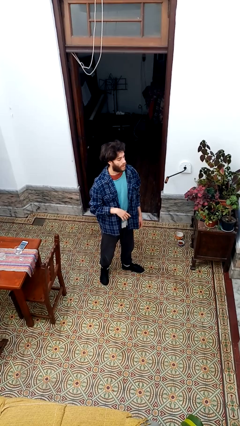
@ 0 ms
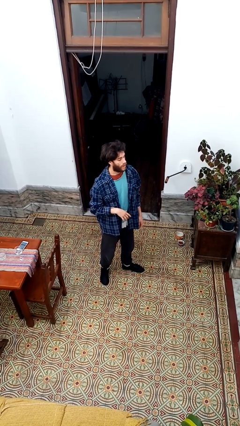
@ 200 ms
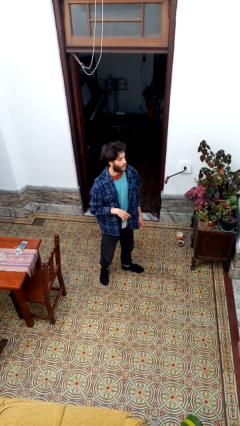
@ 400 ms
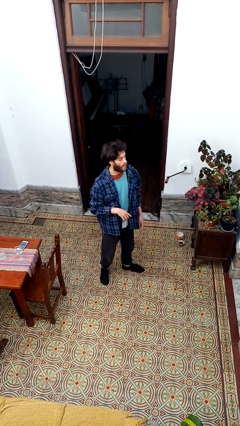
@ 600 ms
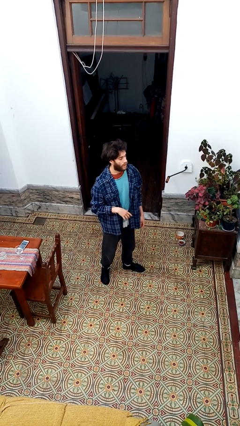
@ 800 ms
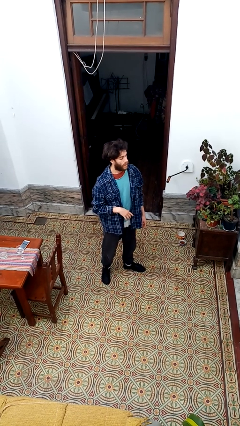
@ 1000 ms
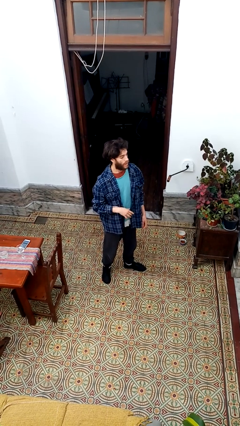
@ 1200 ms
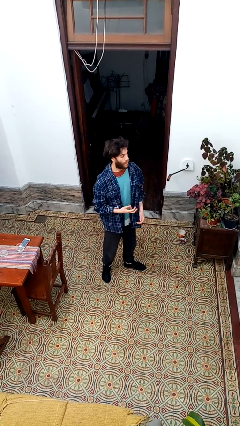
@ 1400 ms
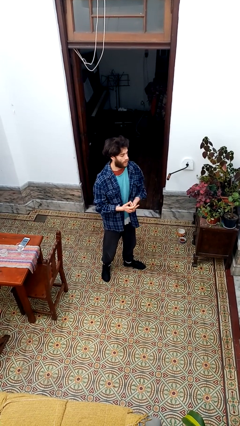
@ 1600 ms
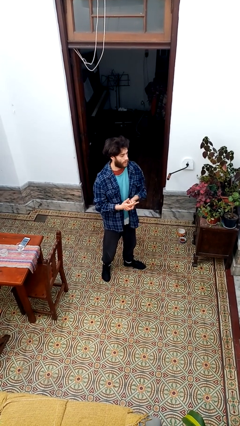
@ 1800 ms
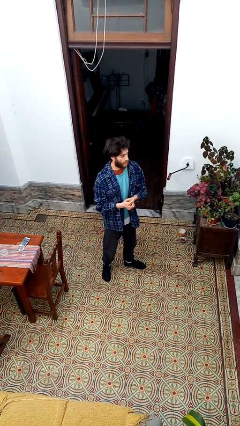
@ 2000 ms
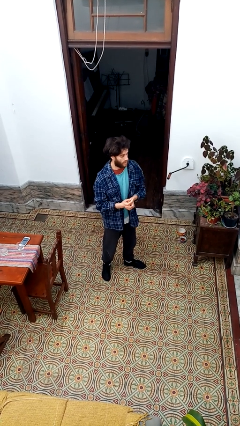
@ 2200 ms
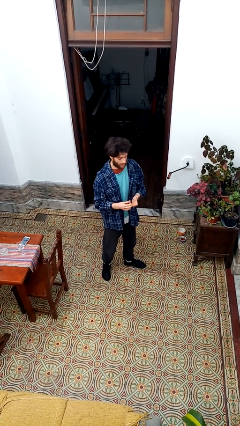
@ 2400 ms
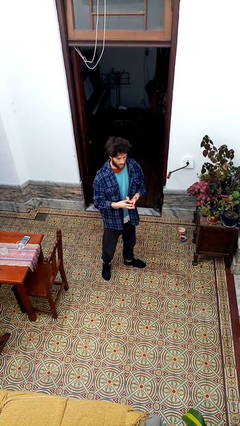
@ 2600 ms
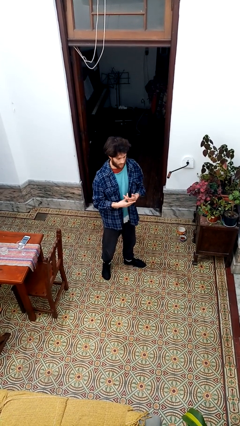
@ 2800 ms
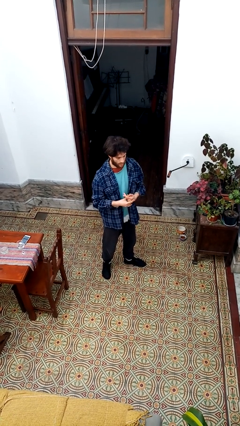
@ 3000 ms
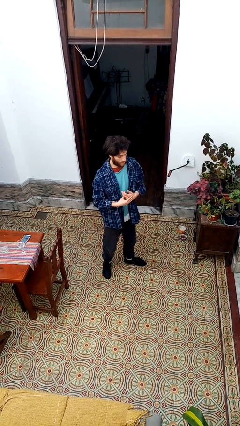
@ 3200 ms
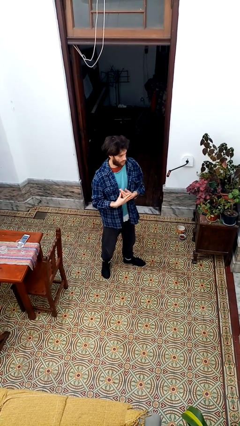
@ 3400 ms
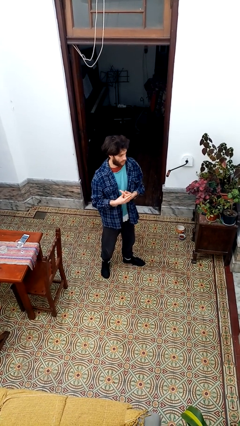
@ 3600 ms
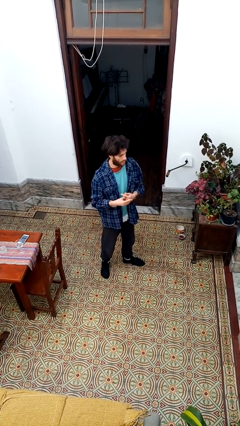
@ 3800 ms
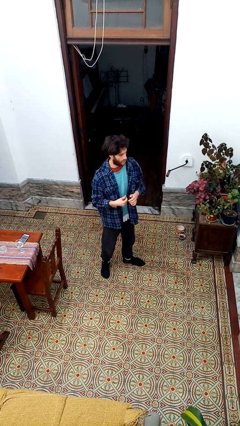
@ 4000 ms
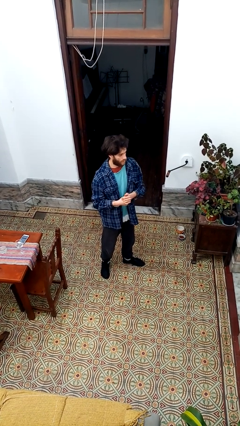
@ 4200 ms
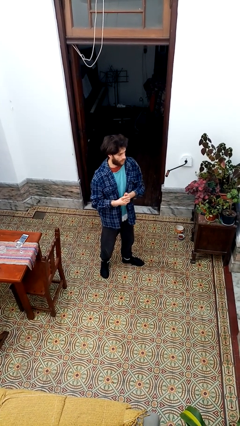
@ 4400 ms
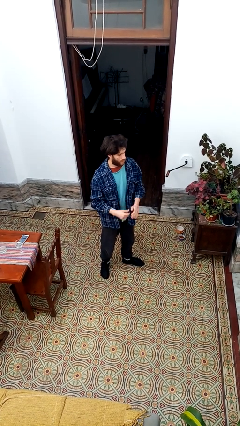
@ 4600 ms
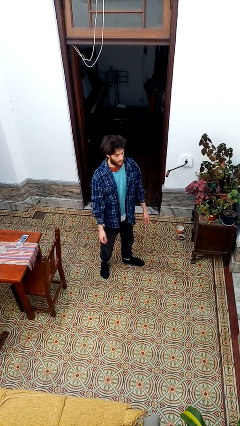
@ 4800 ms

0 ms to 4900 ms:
person cracks knuckles

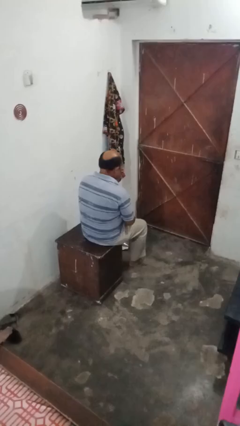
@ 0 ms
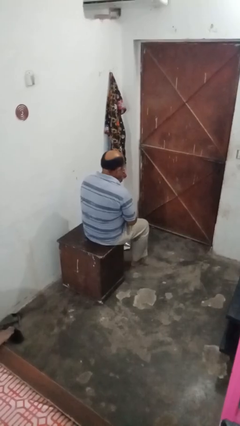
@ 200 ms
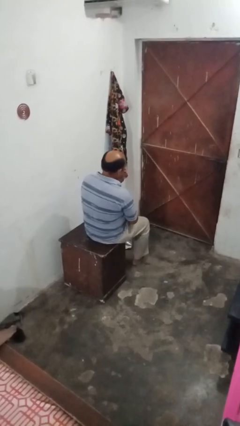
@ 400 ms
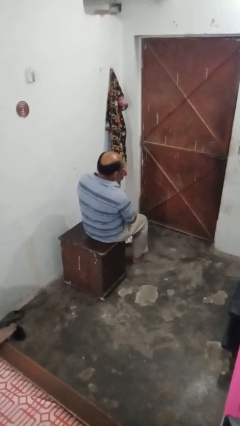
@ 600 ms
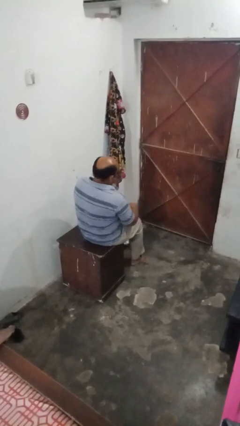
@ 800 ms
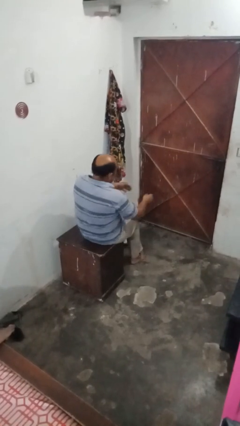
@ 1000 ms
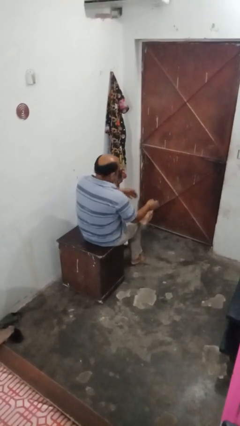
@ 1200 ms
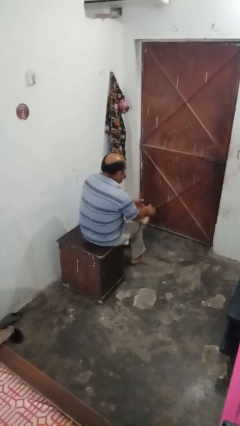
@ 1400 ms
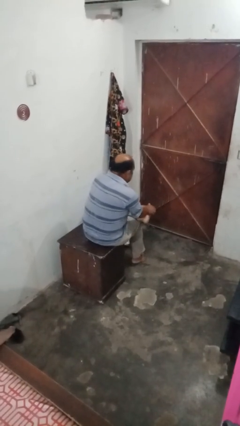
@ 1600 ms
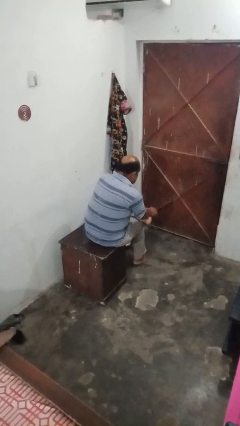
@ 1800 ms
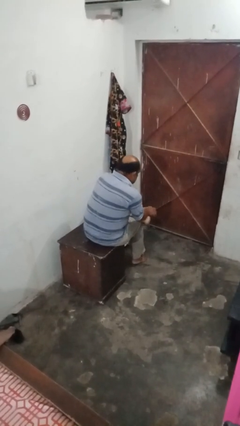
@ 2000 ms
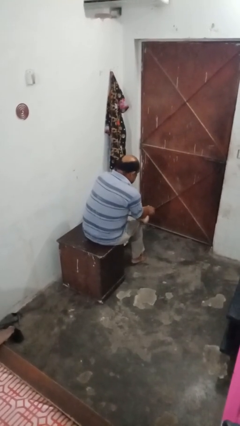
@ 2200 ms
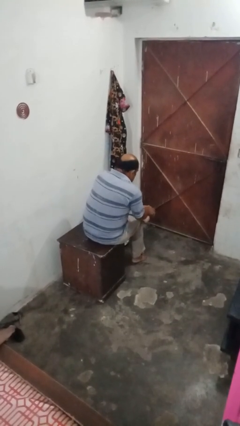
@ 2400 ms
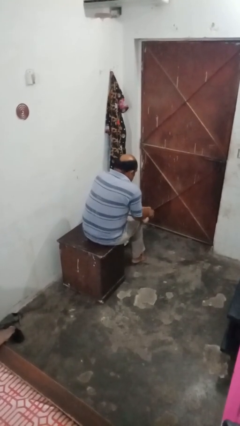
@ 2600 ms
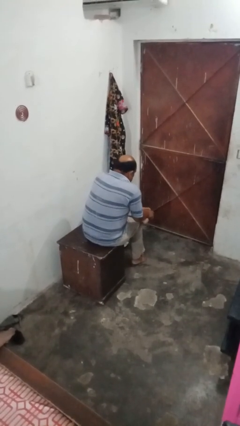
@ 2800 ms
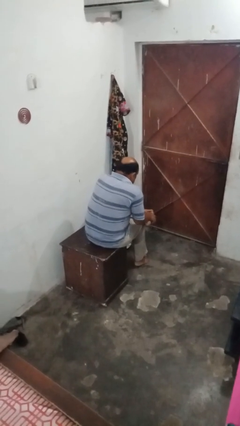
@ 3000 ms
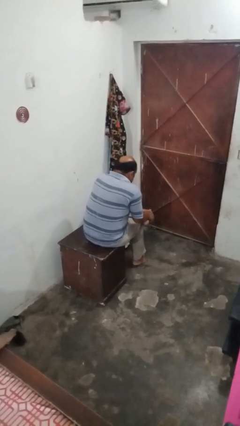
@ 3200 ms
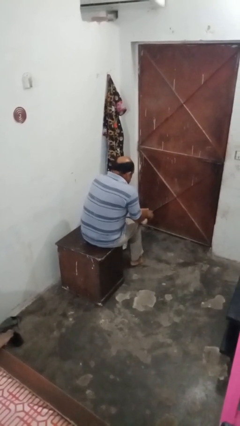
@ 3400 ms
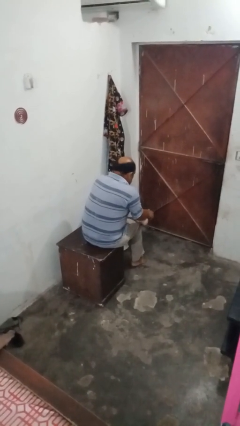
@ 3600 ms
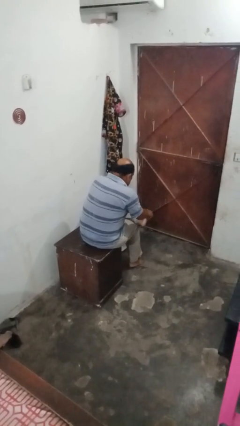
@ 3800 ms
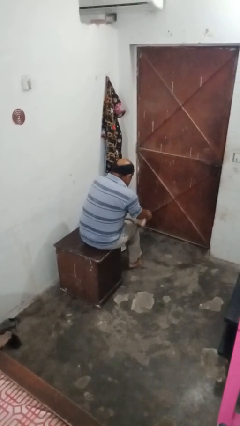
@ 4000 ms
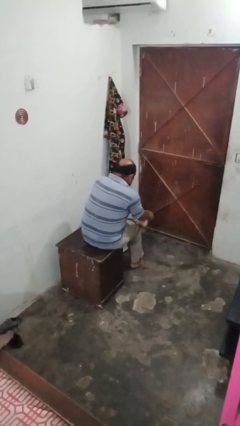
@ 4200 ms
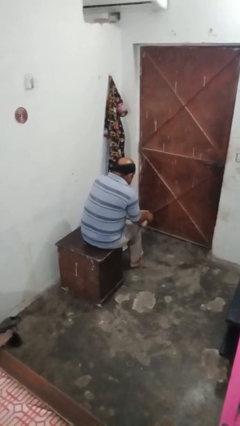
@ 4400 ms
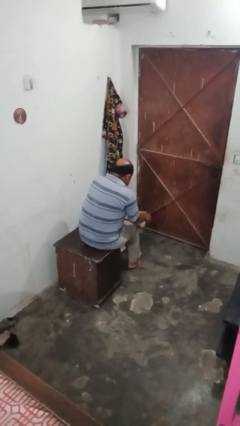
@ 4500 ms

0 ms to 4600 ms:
person rubs foot

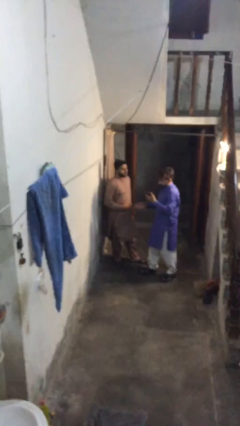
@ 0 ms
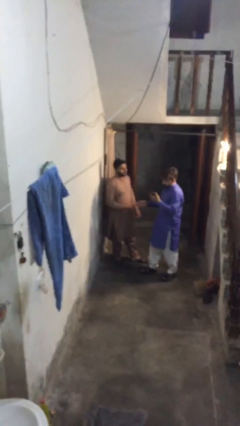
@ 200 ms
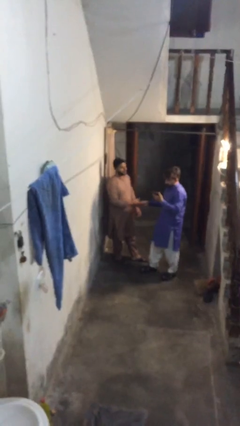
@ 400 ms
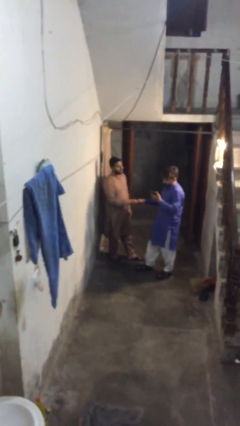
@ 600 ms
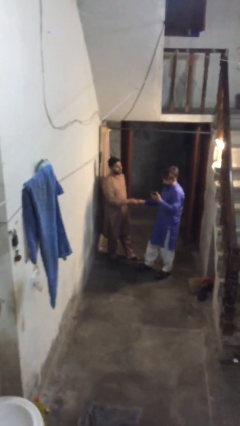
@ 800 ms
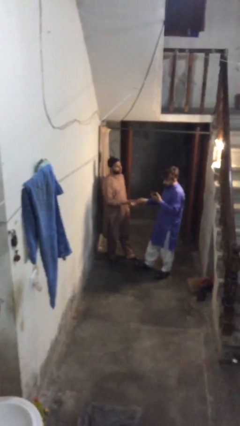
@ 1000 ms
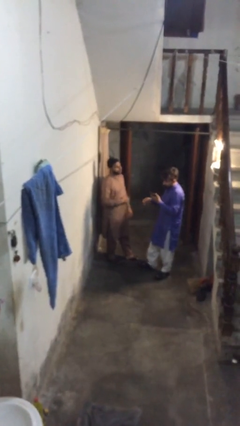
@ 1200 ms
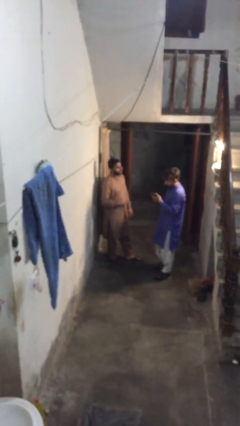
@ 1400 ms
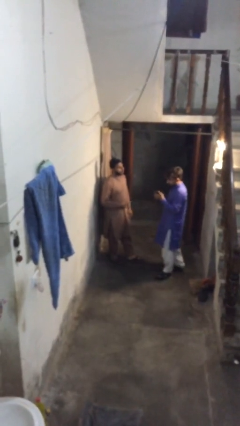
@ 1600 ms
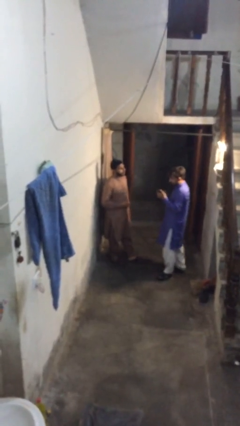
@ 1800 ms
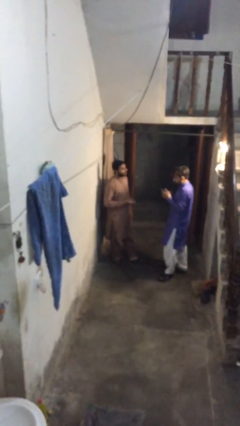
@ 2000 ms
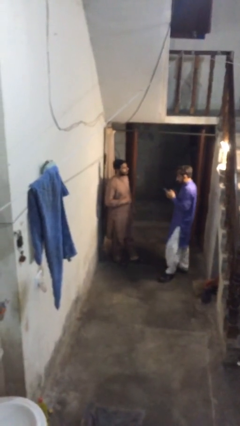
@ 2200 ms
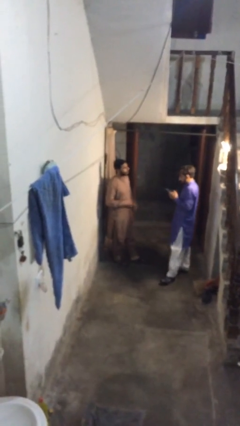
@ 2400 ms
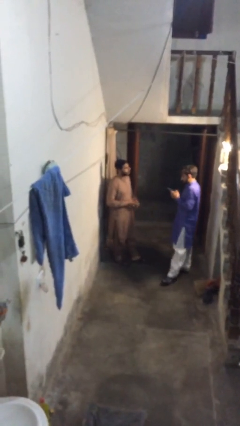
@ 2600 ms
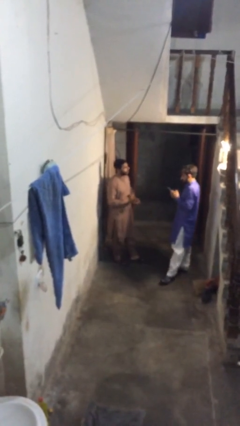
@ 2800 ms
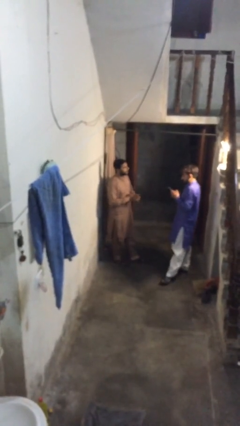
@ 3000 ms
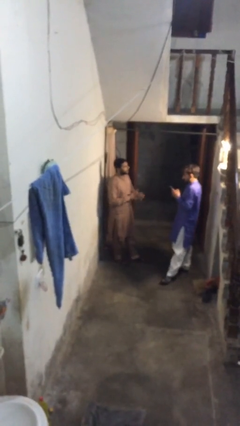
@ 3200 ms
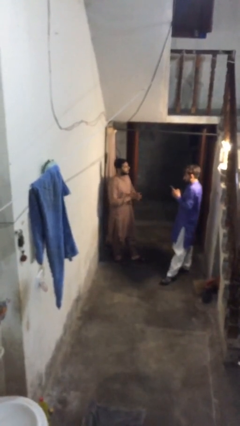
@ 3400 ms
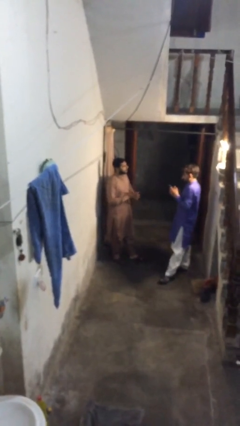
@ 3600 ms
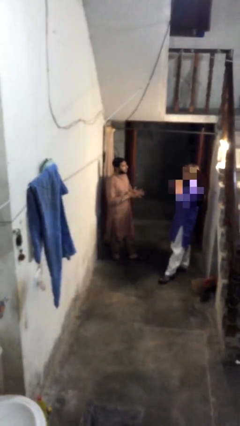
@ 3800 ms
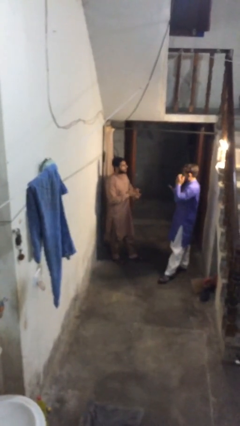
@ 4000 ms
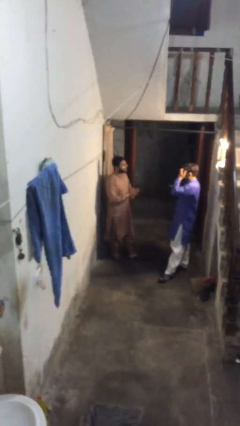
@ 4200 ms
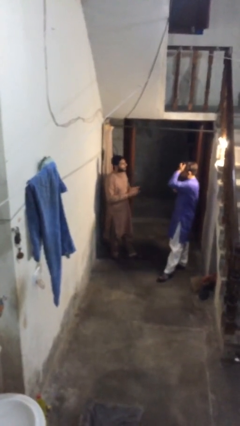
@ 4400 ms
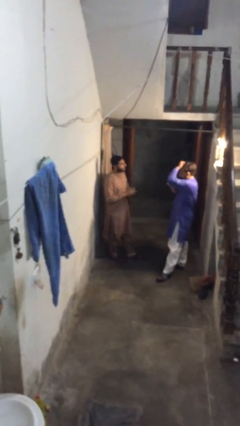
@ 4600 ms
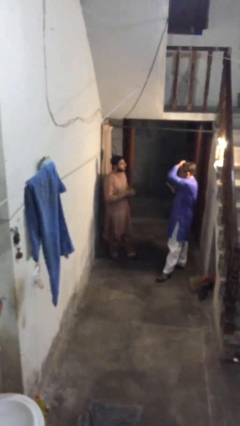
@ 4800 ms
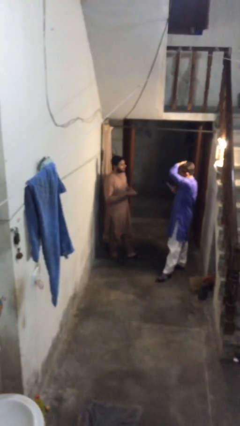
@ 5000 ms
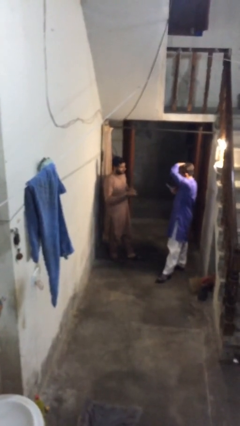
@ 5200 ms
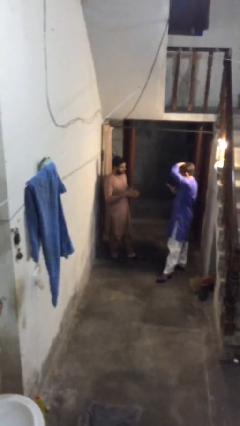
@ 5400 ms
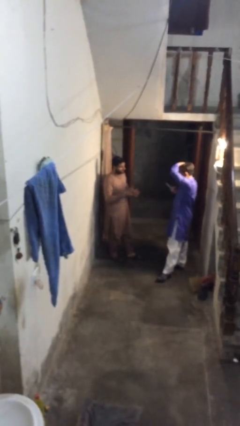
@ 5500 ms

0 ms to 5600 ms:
person talks to person

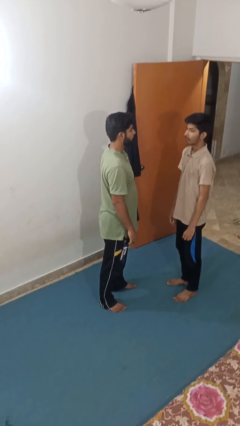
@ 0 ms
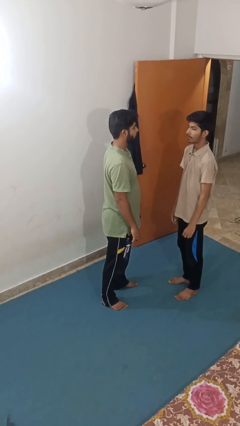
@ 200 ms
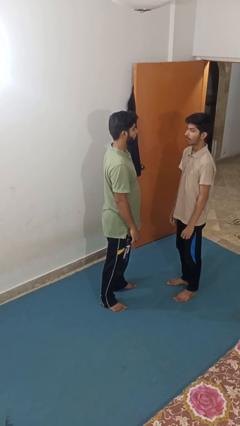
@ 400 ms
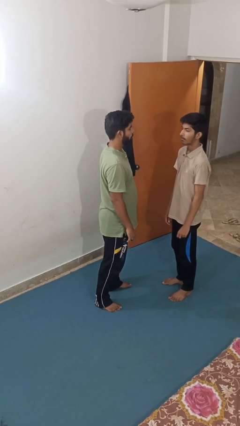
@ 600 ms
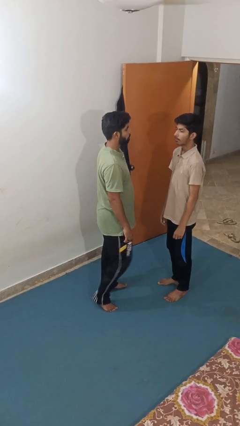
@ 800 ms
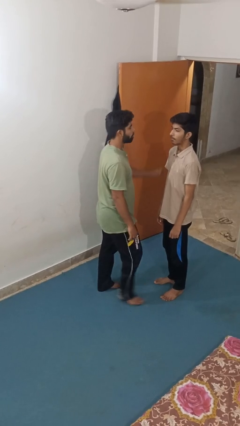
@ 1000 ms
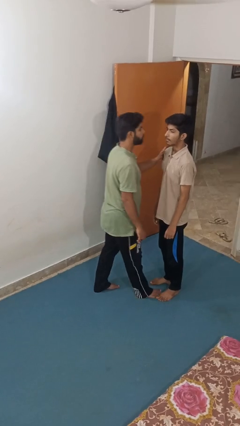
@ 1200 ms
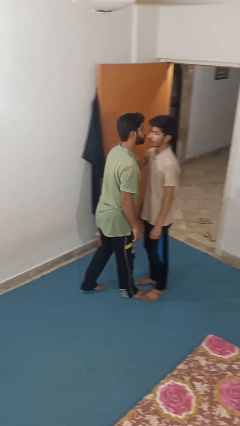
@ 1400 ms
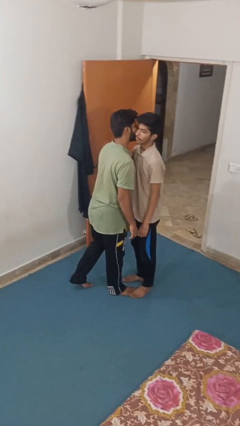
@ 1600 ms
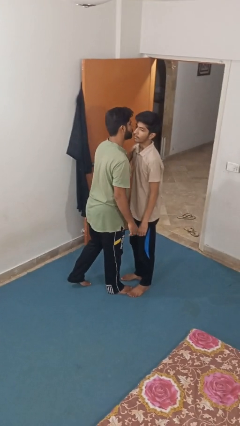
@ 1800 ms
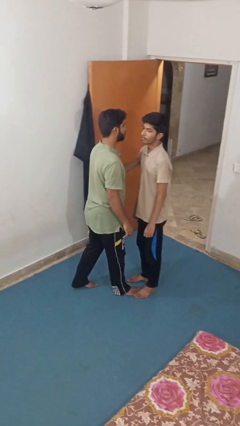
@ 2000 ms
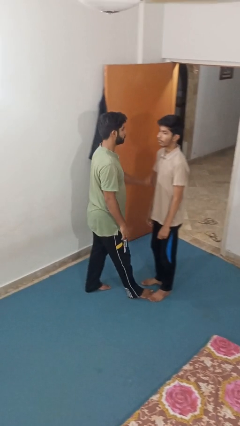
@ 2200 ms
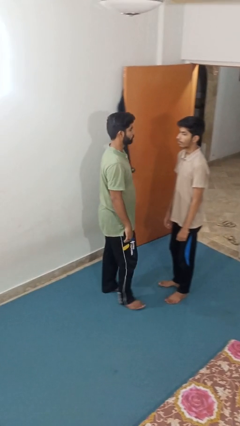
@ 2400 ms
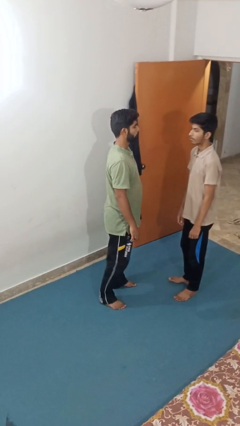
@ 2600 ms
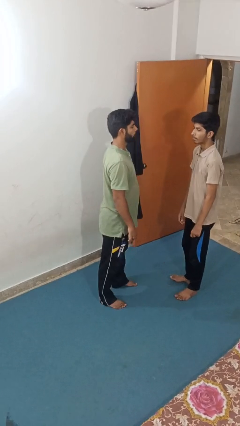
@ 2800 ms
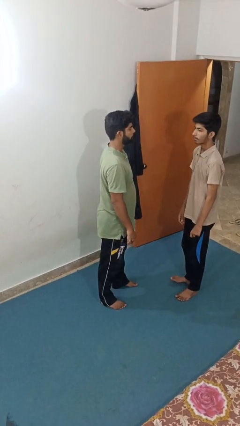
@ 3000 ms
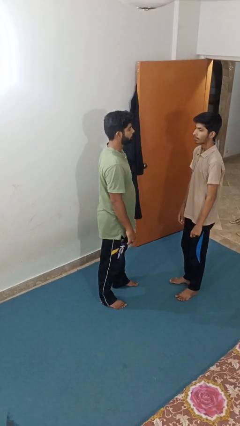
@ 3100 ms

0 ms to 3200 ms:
person kisses cheek of person
